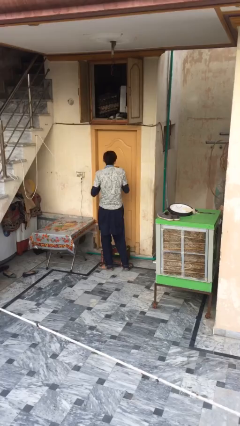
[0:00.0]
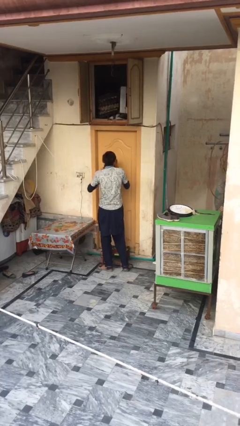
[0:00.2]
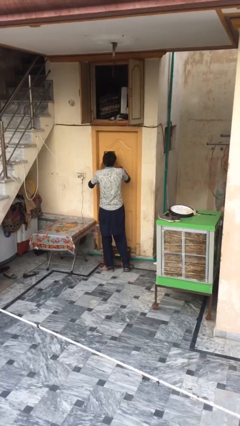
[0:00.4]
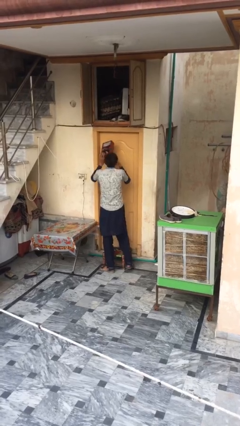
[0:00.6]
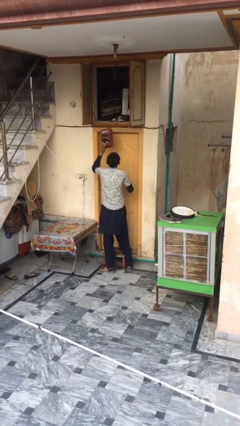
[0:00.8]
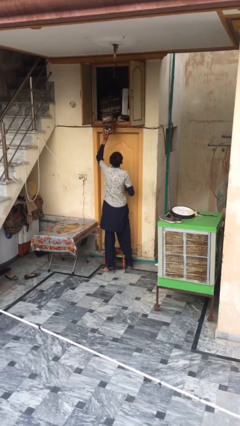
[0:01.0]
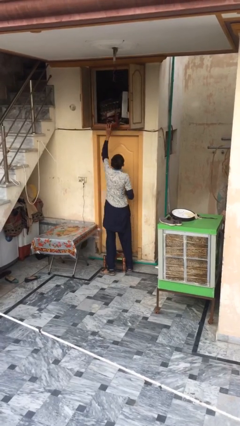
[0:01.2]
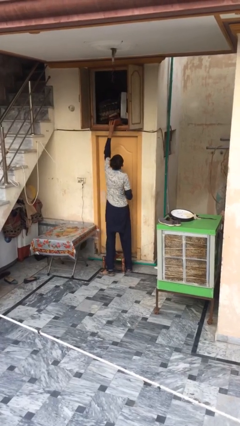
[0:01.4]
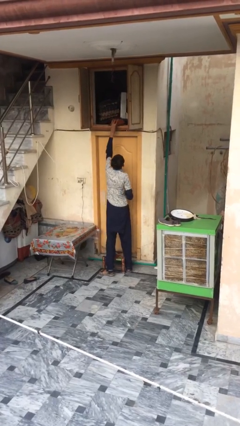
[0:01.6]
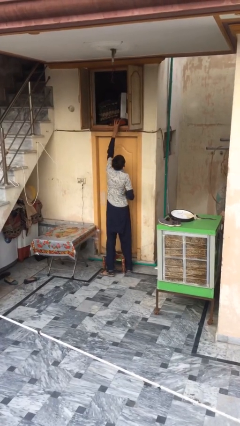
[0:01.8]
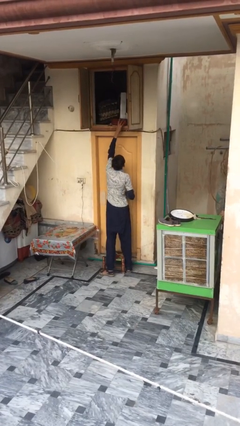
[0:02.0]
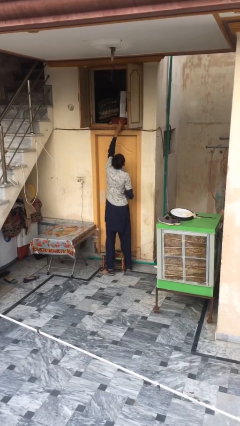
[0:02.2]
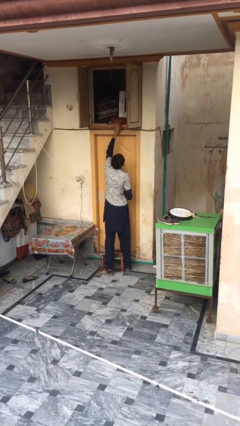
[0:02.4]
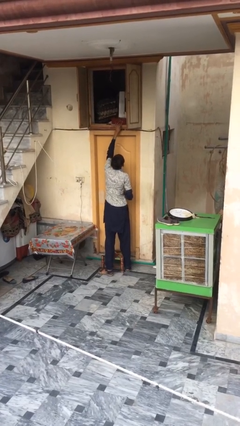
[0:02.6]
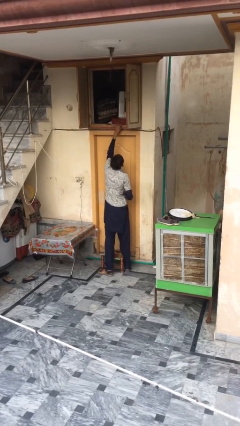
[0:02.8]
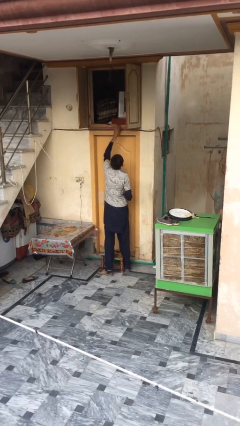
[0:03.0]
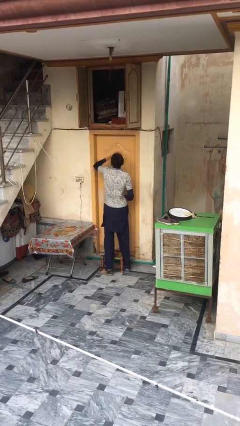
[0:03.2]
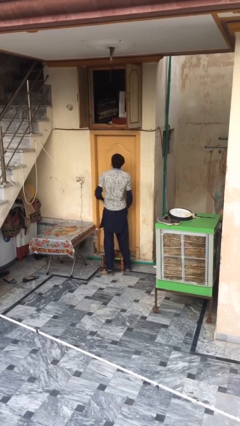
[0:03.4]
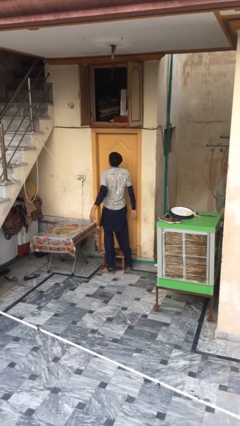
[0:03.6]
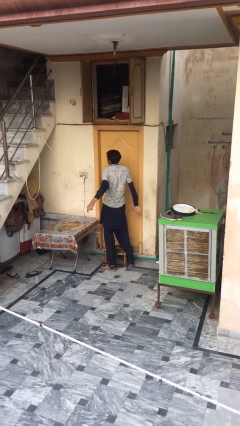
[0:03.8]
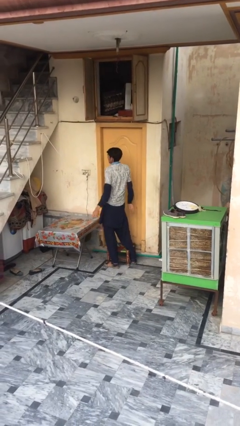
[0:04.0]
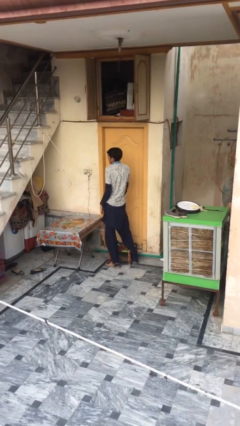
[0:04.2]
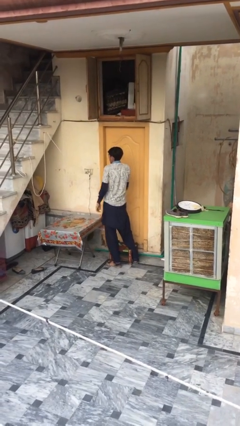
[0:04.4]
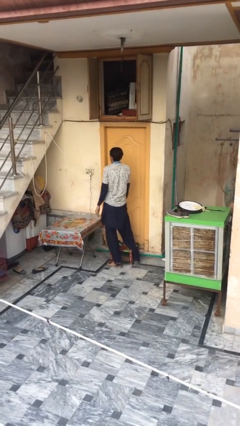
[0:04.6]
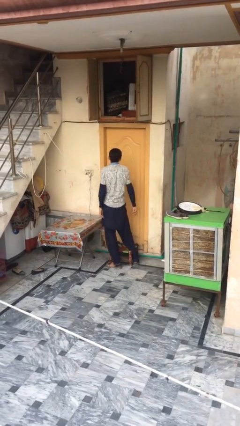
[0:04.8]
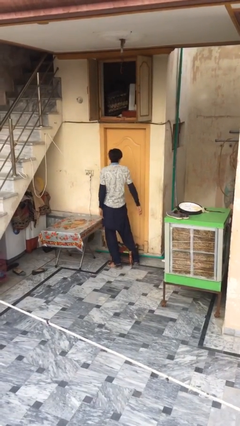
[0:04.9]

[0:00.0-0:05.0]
person puts down object on shelf

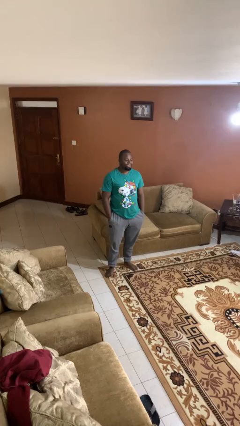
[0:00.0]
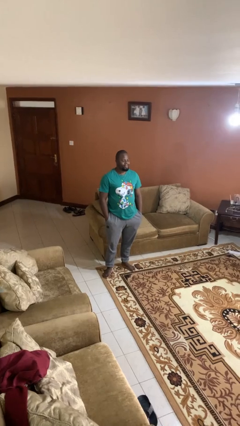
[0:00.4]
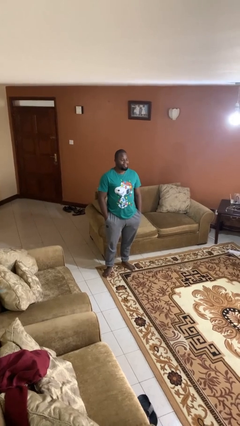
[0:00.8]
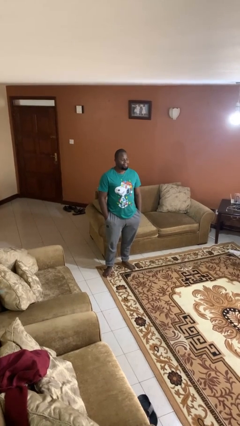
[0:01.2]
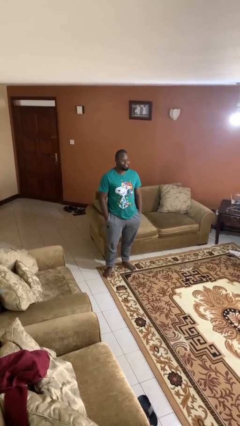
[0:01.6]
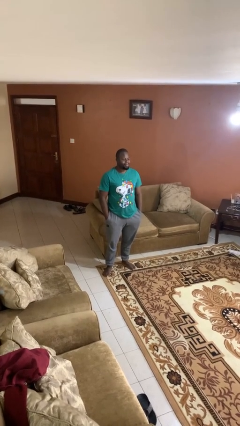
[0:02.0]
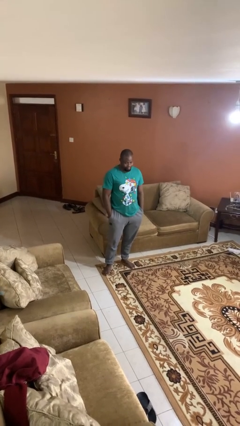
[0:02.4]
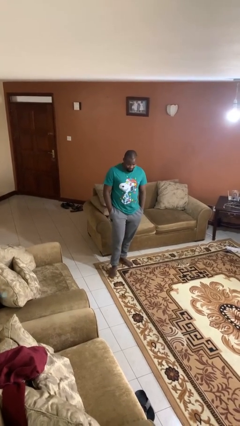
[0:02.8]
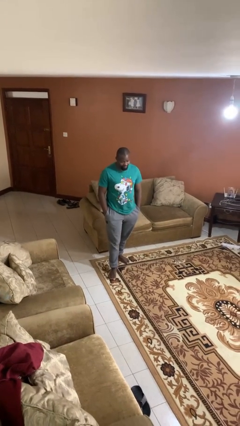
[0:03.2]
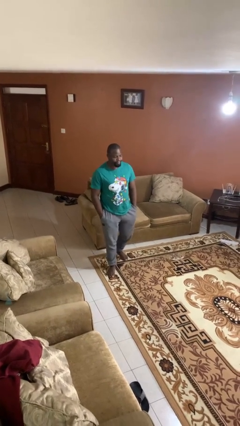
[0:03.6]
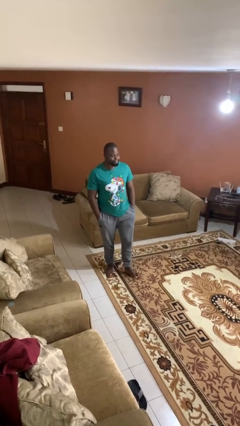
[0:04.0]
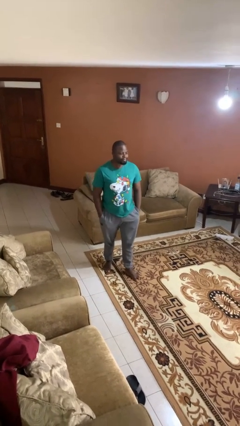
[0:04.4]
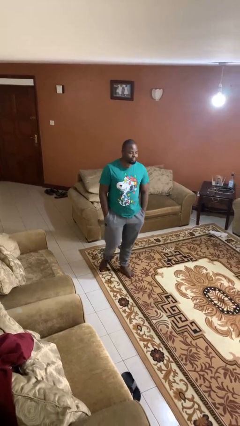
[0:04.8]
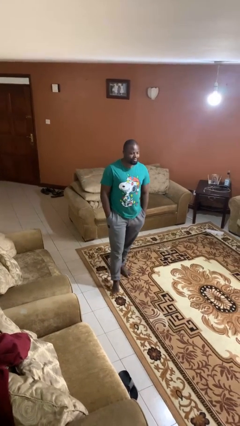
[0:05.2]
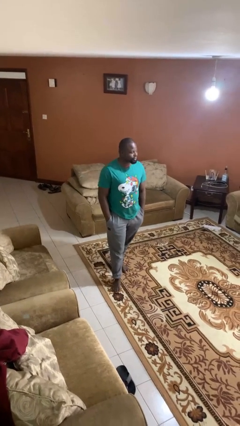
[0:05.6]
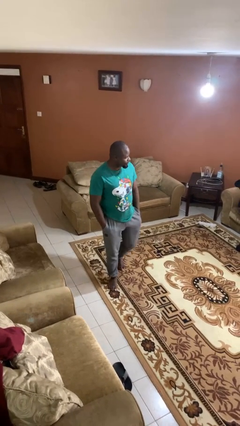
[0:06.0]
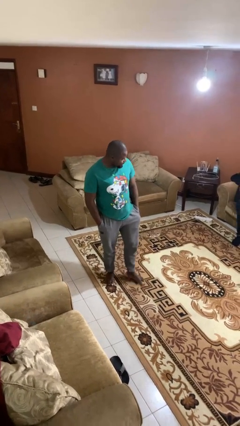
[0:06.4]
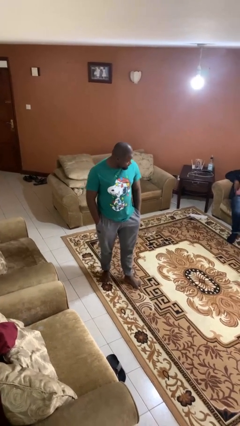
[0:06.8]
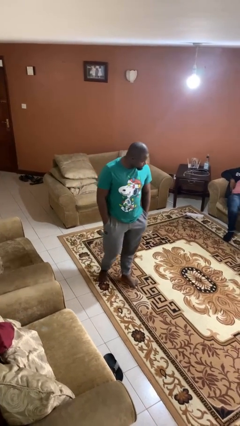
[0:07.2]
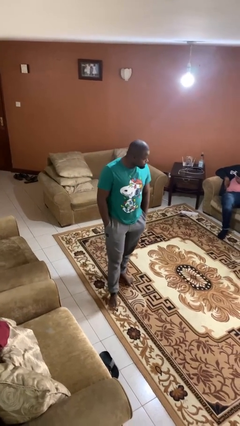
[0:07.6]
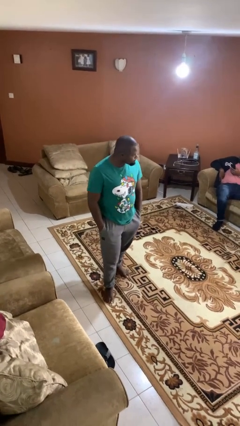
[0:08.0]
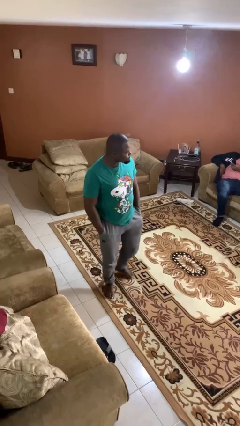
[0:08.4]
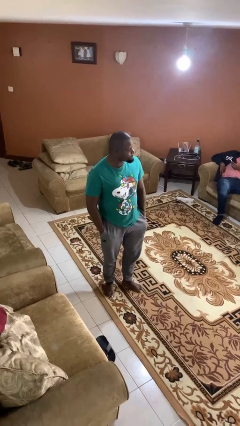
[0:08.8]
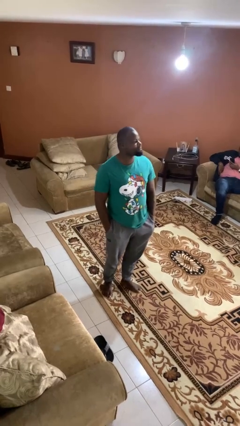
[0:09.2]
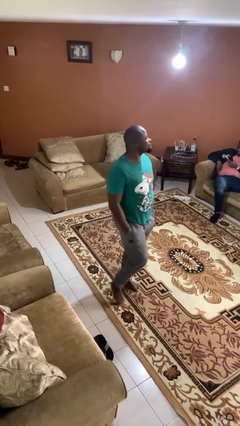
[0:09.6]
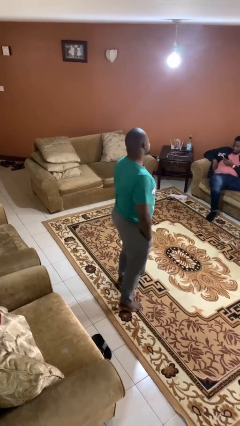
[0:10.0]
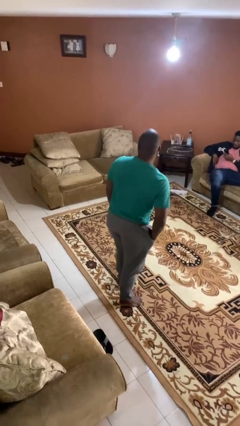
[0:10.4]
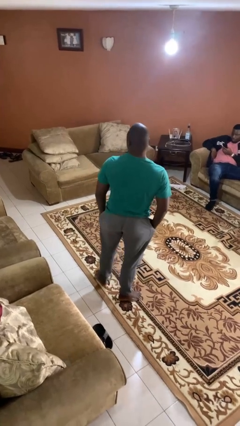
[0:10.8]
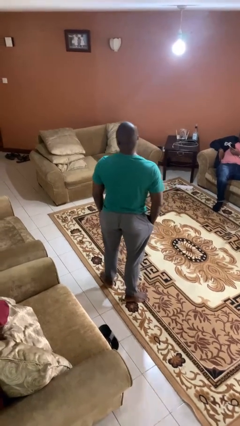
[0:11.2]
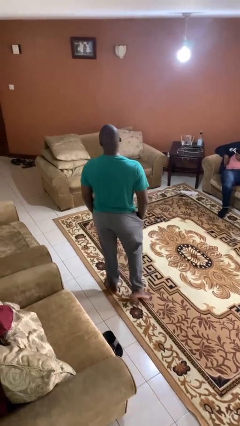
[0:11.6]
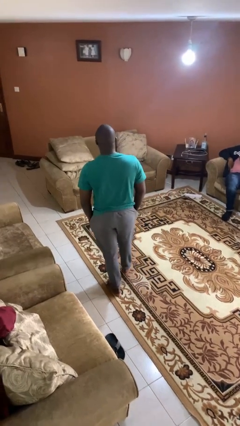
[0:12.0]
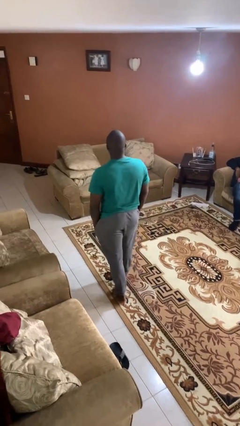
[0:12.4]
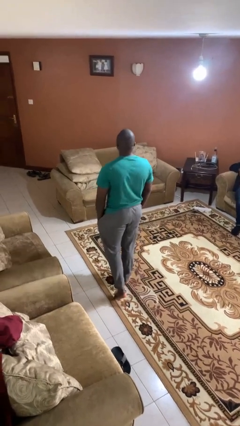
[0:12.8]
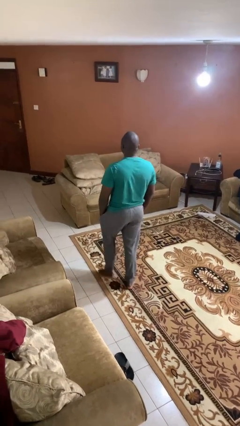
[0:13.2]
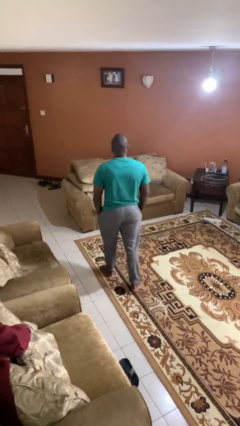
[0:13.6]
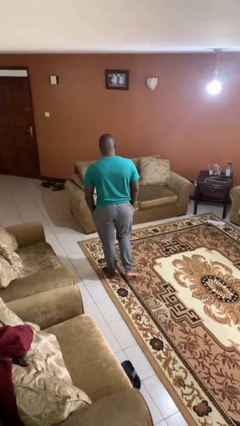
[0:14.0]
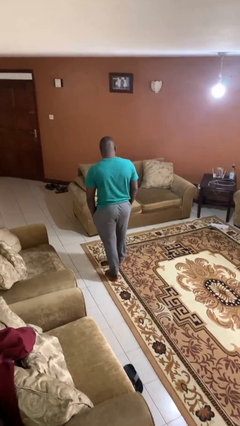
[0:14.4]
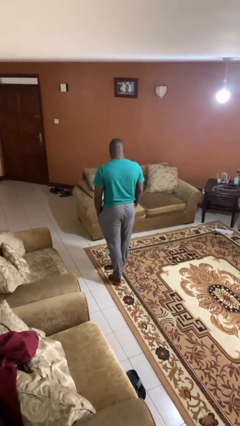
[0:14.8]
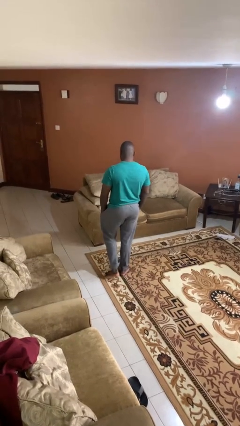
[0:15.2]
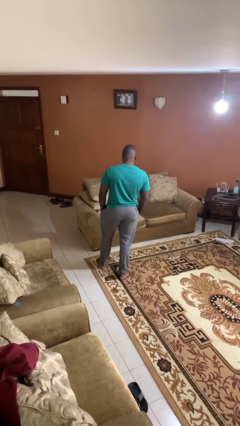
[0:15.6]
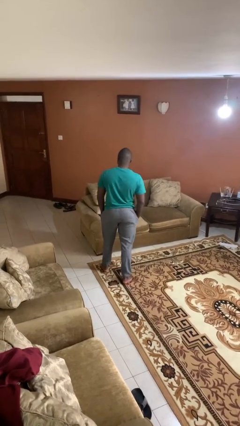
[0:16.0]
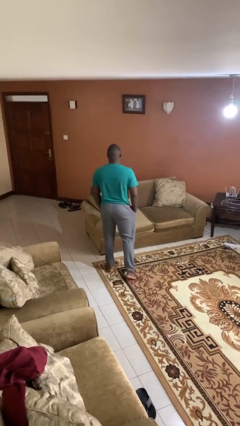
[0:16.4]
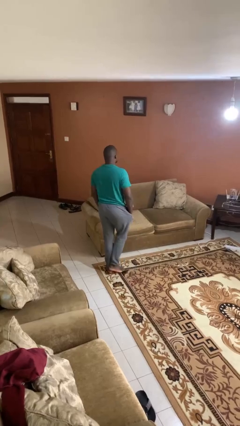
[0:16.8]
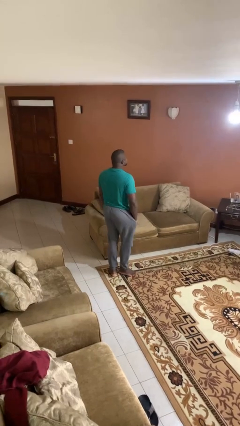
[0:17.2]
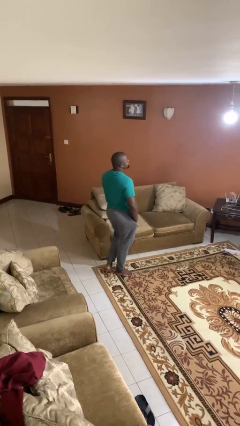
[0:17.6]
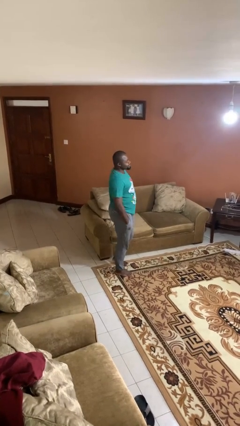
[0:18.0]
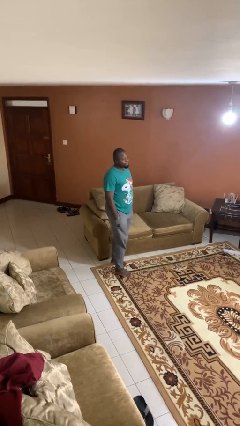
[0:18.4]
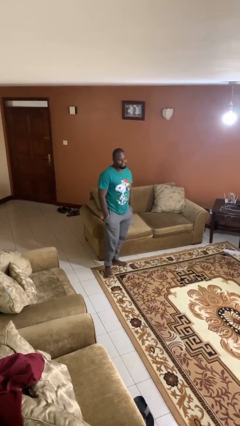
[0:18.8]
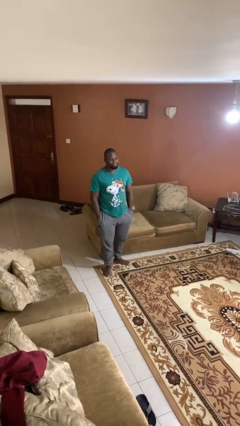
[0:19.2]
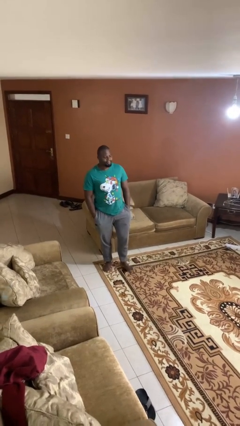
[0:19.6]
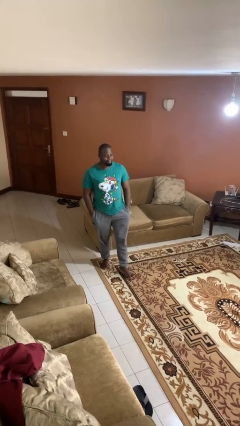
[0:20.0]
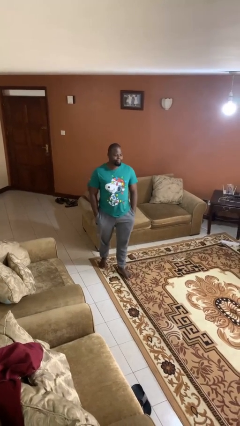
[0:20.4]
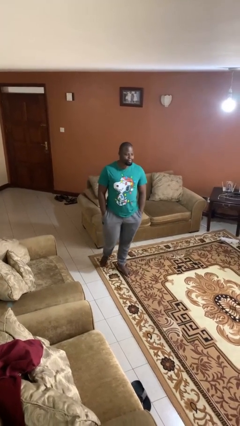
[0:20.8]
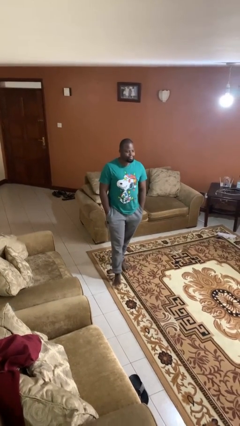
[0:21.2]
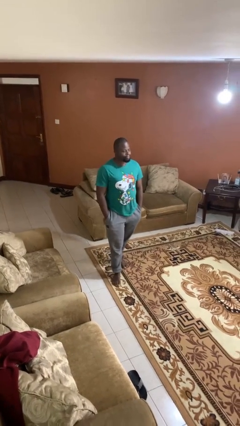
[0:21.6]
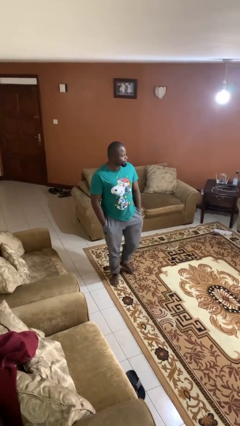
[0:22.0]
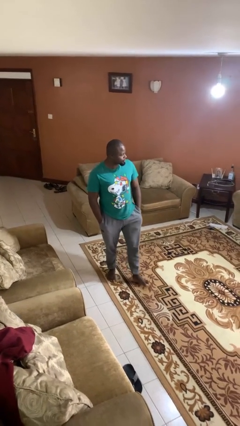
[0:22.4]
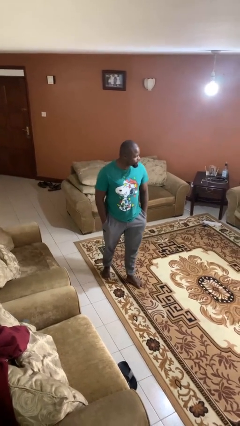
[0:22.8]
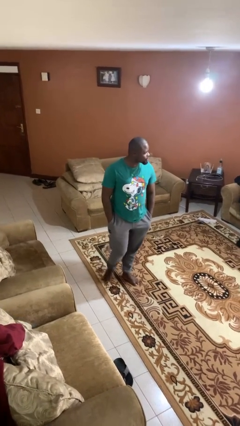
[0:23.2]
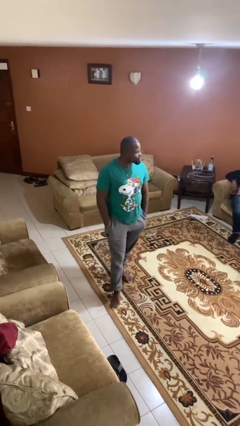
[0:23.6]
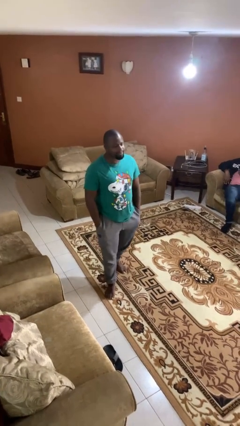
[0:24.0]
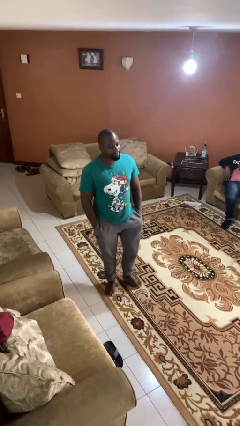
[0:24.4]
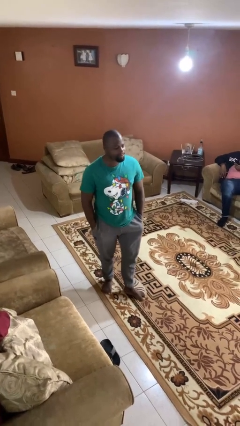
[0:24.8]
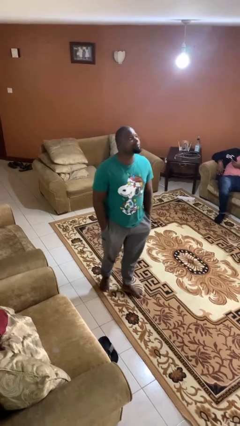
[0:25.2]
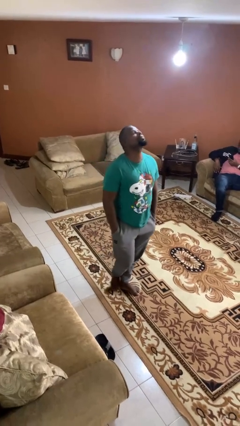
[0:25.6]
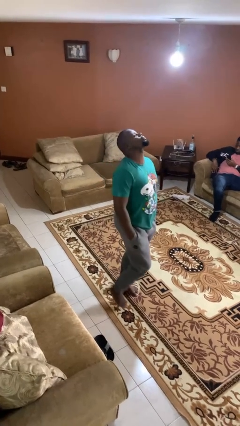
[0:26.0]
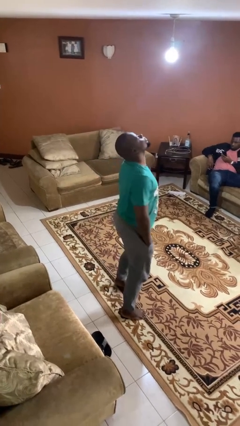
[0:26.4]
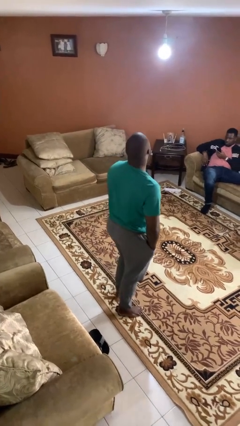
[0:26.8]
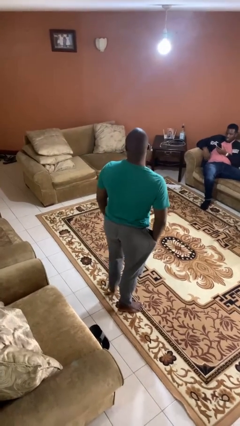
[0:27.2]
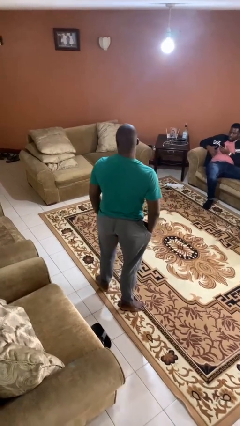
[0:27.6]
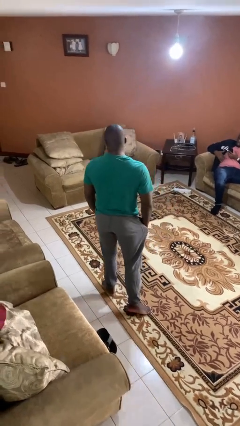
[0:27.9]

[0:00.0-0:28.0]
person walks
